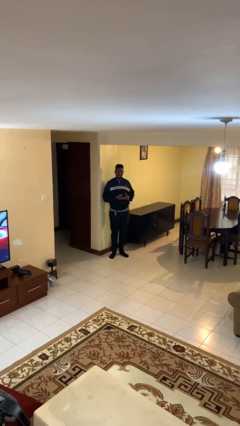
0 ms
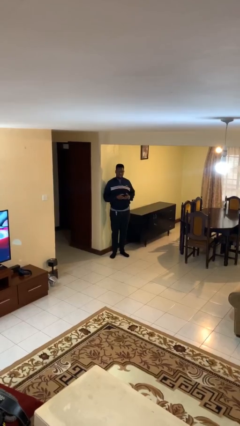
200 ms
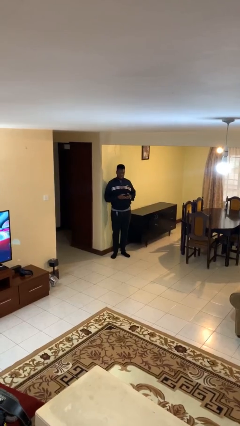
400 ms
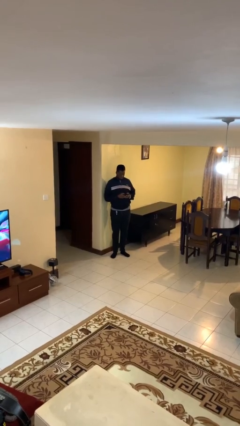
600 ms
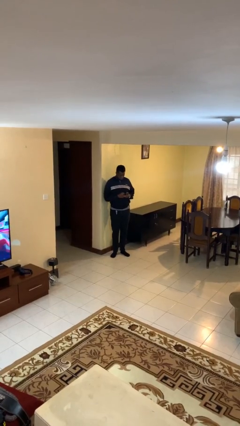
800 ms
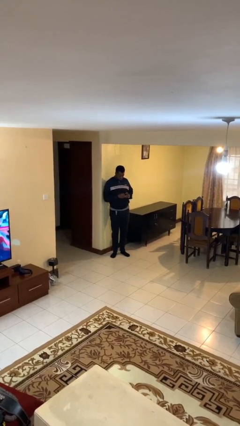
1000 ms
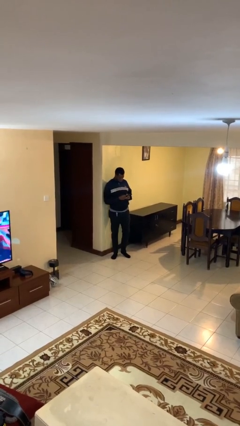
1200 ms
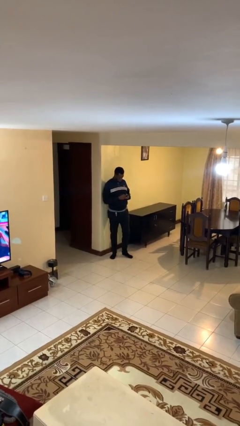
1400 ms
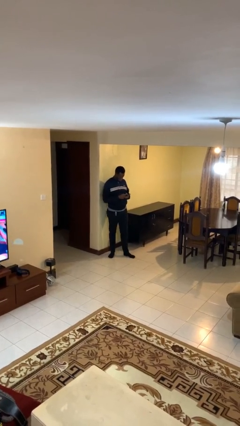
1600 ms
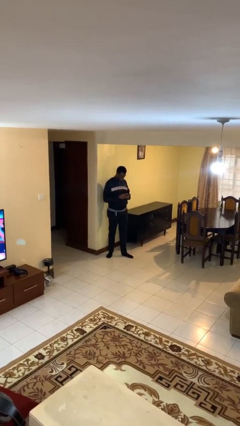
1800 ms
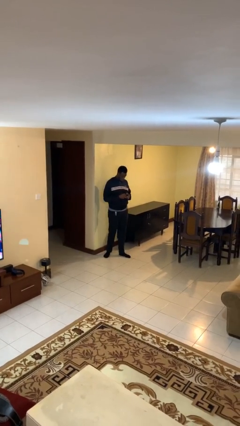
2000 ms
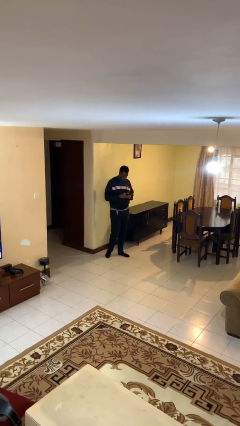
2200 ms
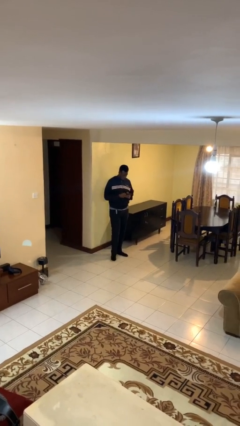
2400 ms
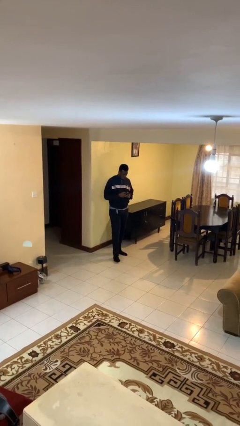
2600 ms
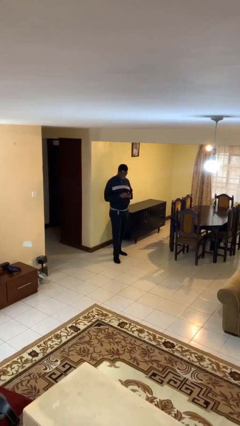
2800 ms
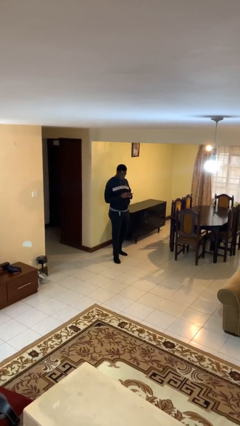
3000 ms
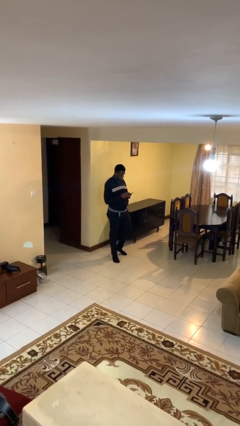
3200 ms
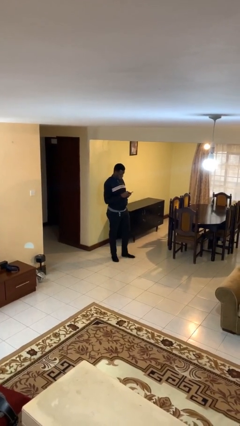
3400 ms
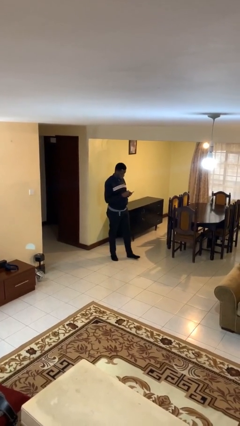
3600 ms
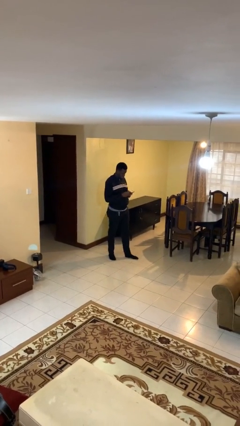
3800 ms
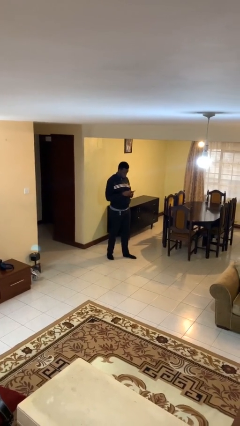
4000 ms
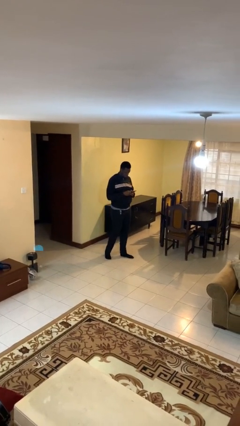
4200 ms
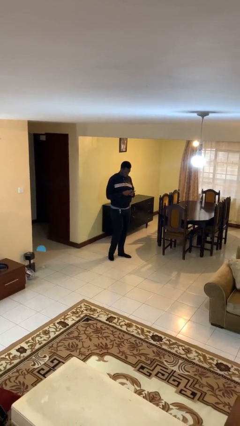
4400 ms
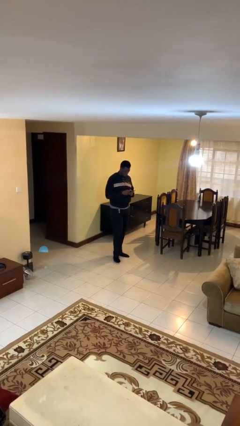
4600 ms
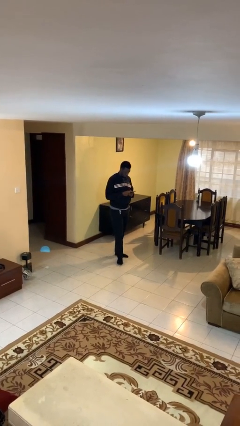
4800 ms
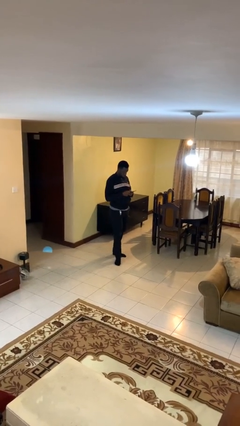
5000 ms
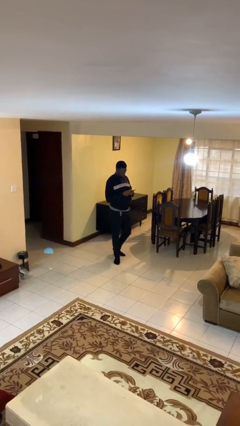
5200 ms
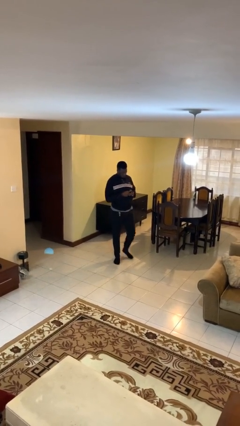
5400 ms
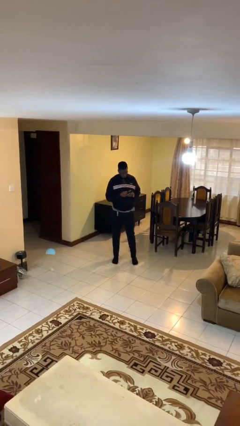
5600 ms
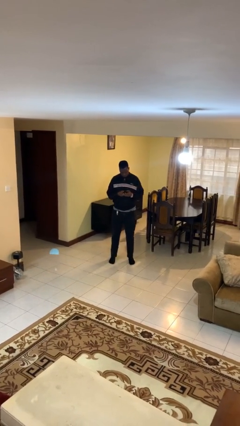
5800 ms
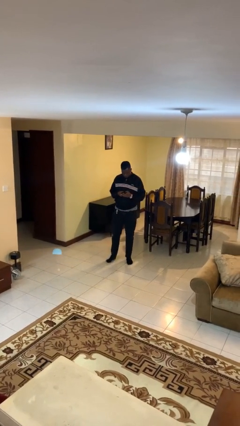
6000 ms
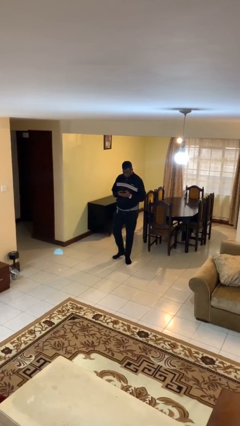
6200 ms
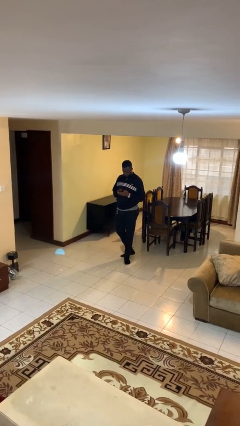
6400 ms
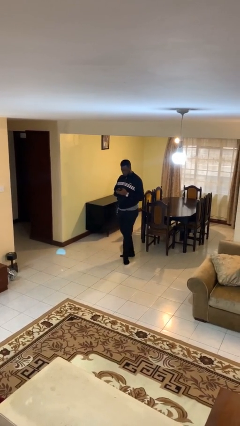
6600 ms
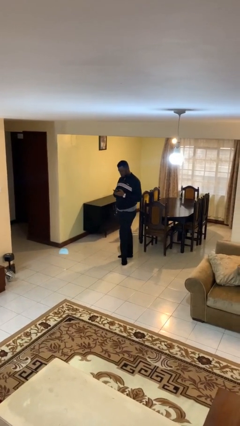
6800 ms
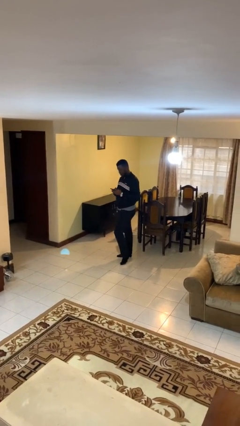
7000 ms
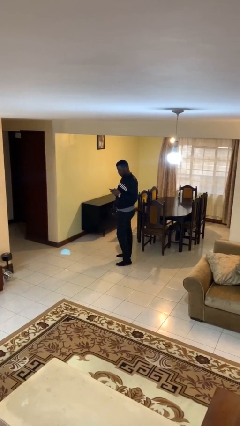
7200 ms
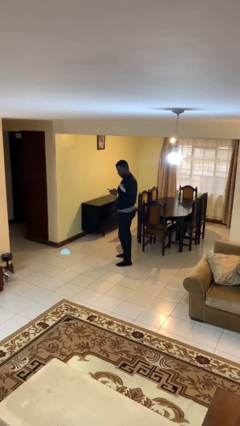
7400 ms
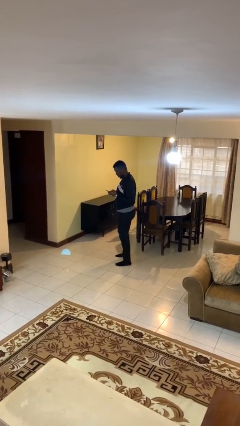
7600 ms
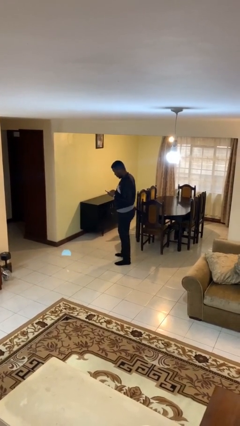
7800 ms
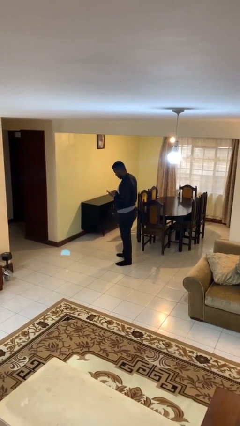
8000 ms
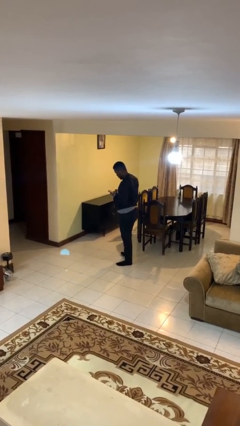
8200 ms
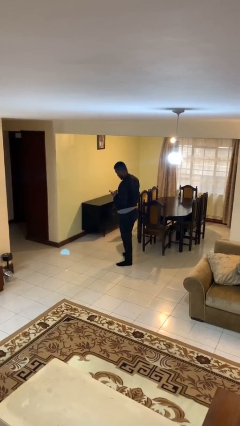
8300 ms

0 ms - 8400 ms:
person texts on phone

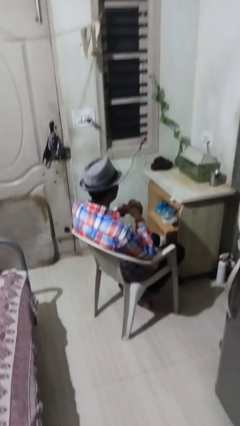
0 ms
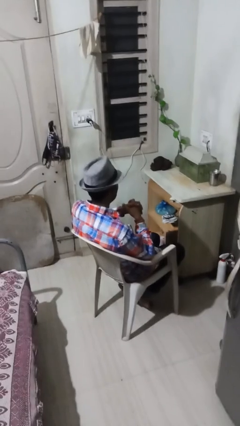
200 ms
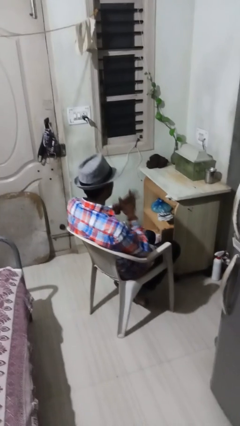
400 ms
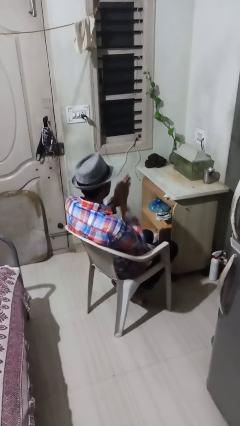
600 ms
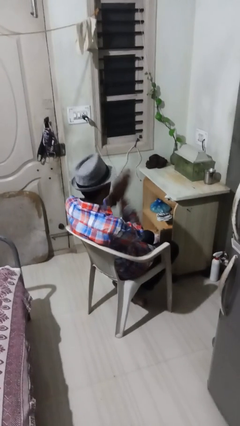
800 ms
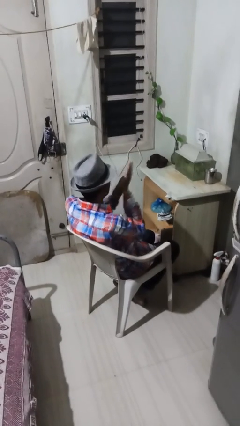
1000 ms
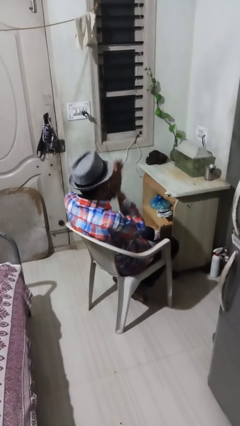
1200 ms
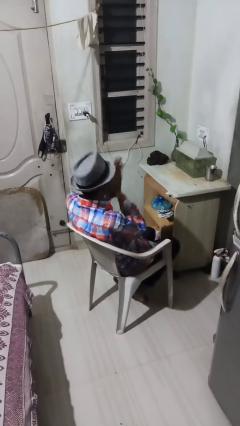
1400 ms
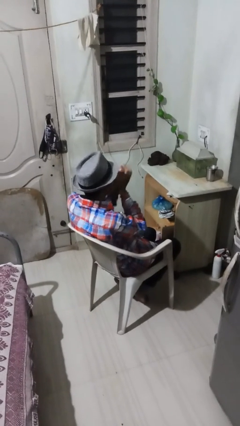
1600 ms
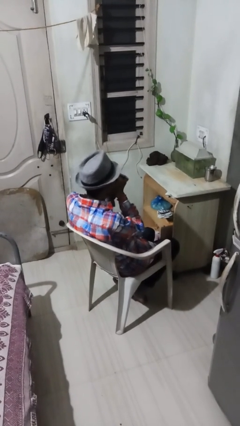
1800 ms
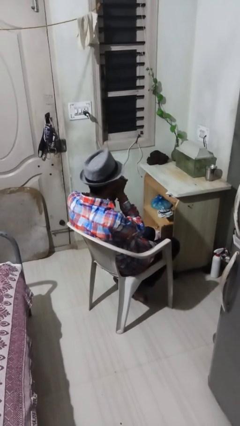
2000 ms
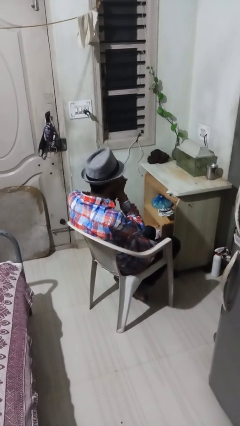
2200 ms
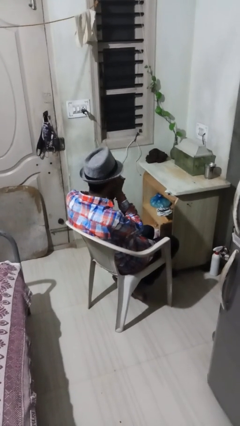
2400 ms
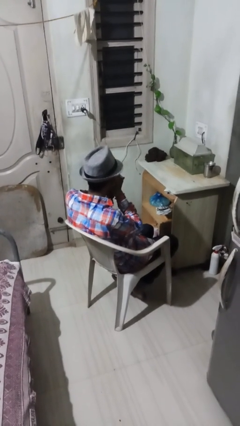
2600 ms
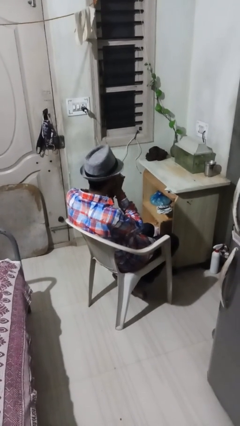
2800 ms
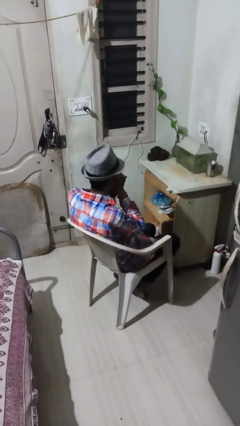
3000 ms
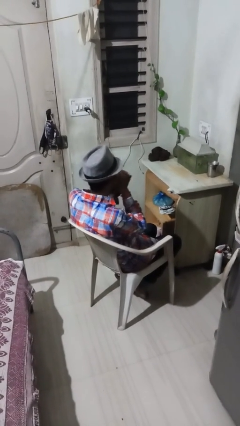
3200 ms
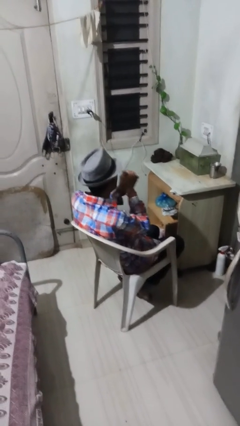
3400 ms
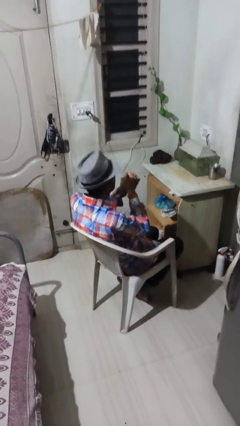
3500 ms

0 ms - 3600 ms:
person blows into hands

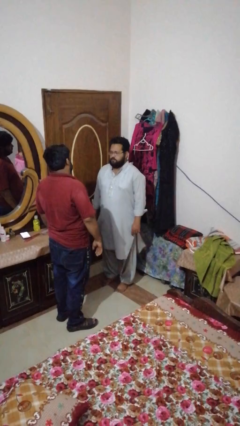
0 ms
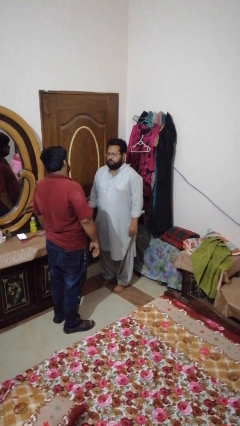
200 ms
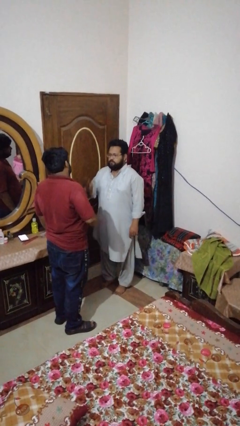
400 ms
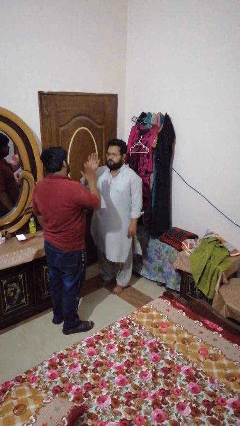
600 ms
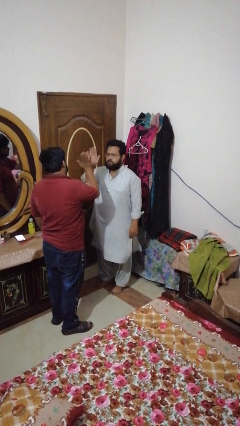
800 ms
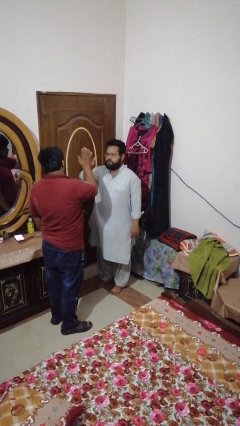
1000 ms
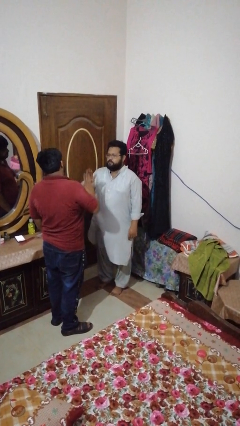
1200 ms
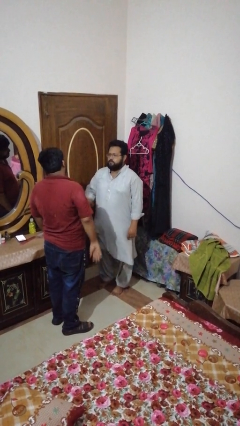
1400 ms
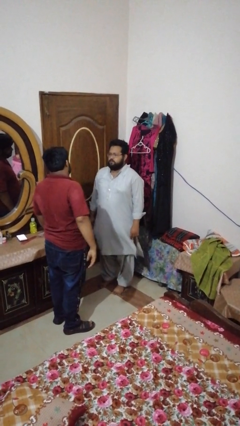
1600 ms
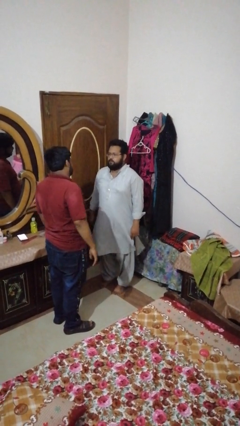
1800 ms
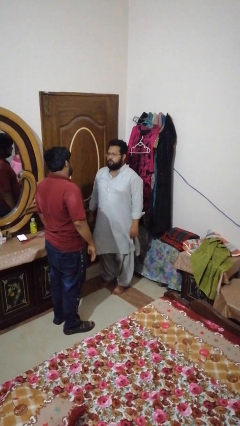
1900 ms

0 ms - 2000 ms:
person highfives hand

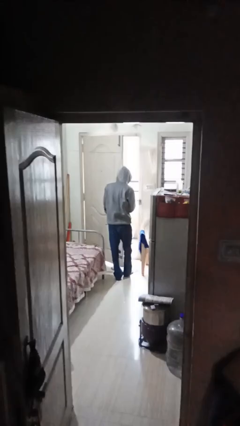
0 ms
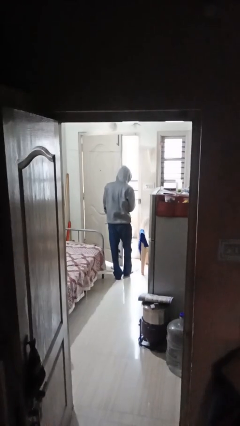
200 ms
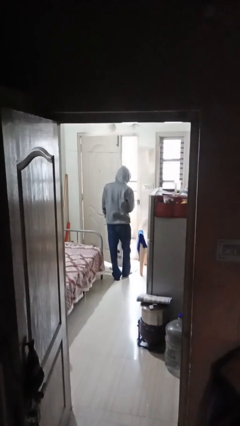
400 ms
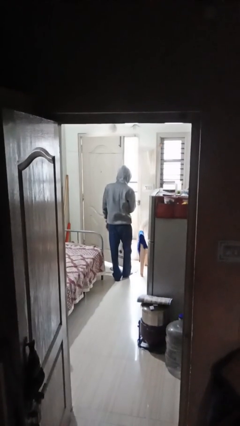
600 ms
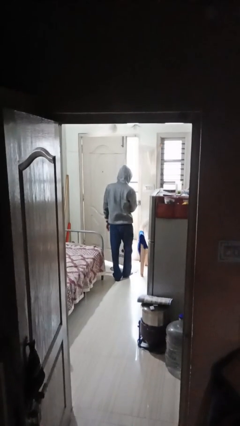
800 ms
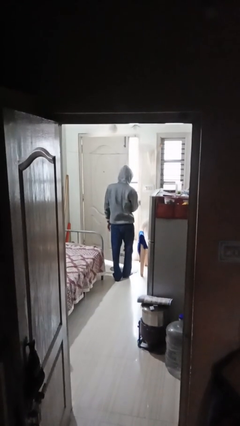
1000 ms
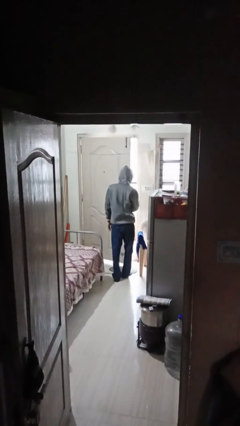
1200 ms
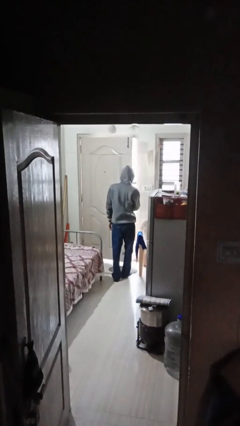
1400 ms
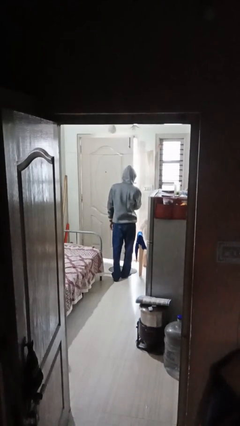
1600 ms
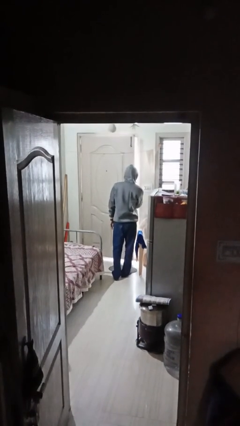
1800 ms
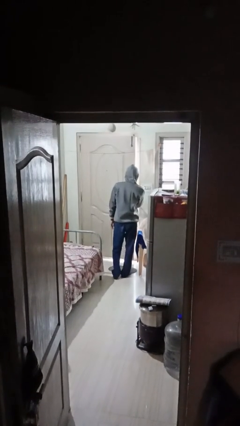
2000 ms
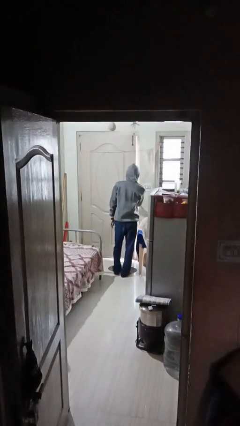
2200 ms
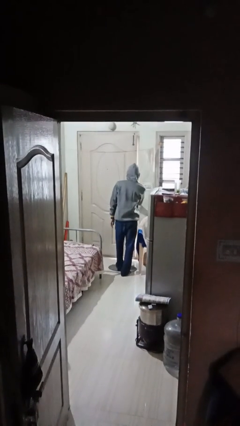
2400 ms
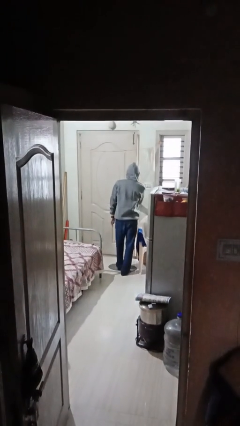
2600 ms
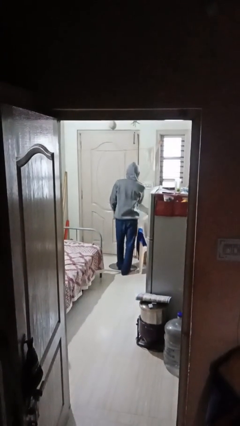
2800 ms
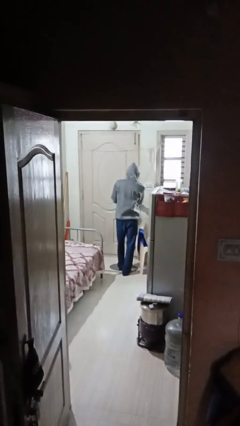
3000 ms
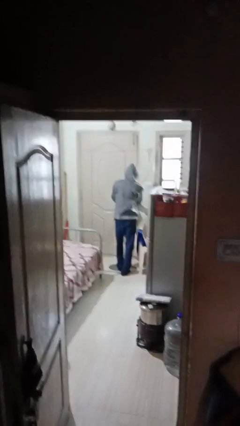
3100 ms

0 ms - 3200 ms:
person closes facility door

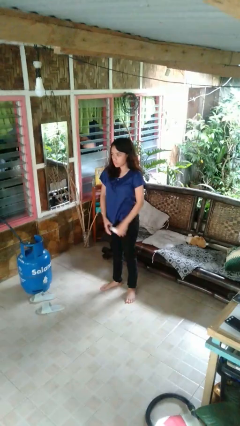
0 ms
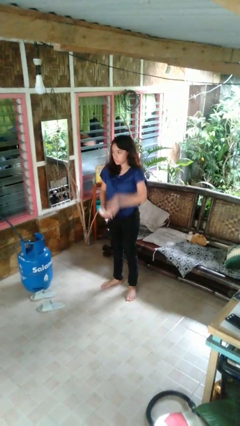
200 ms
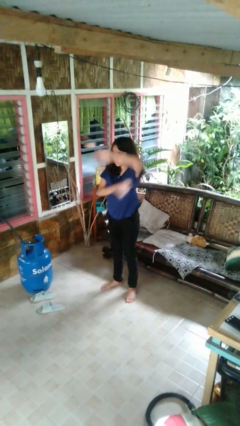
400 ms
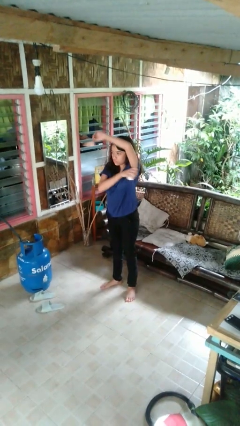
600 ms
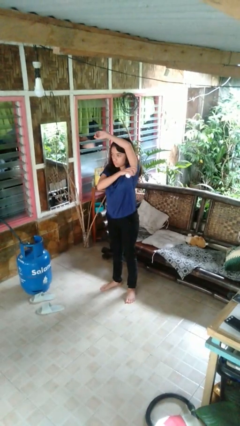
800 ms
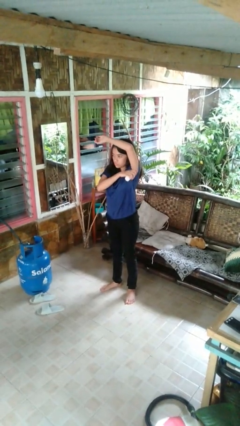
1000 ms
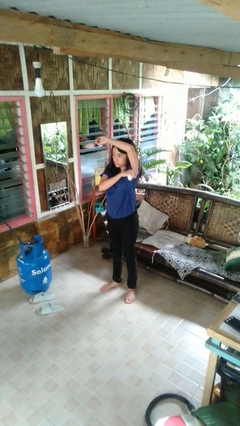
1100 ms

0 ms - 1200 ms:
person applies deodorant
